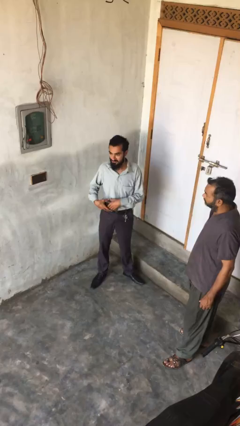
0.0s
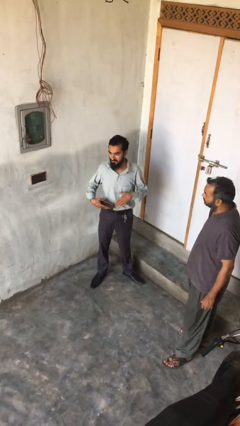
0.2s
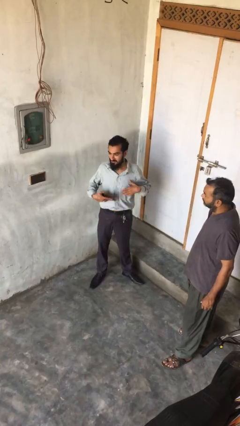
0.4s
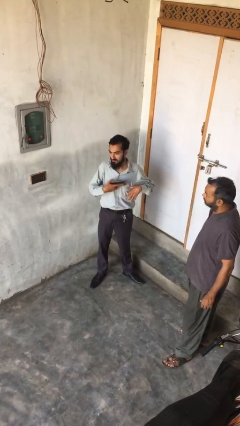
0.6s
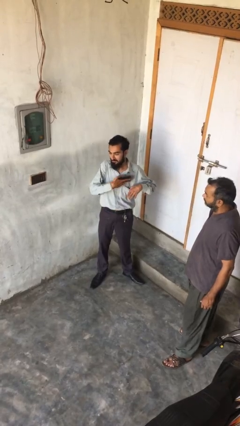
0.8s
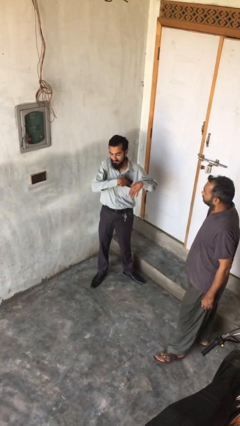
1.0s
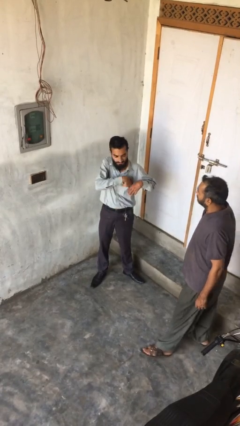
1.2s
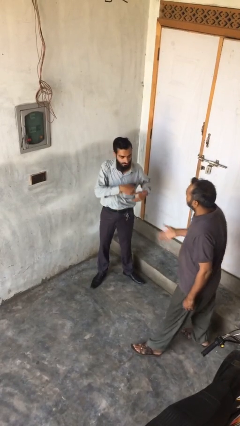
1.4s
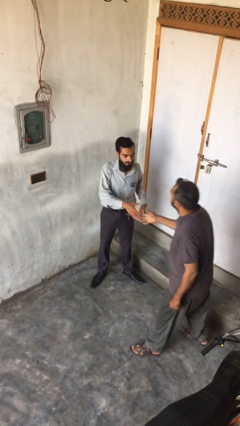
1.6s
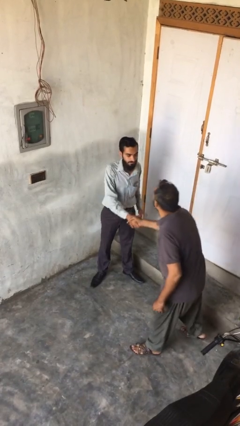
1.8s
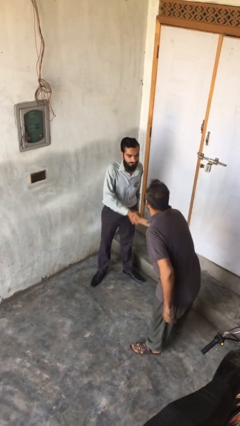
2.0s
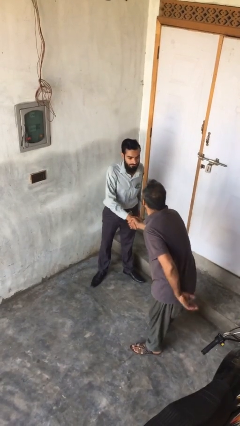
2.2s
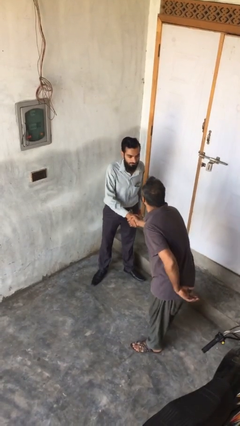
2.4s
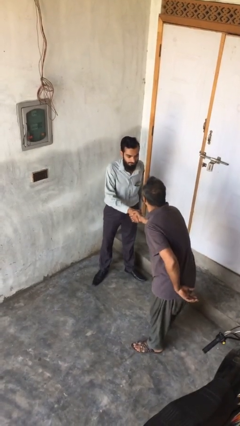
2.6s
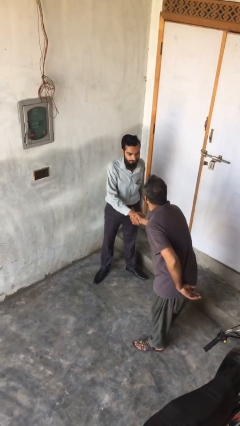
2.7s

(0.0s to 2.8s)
person shakes hand

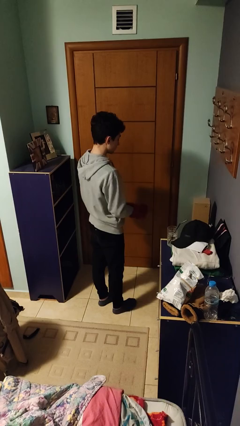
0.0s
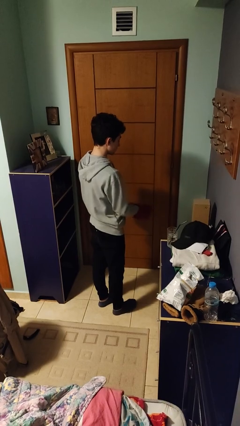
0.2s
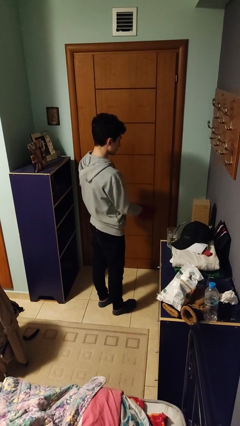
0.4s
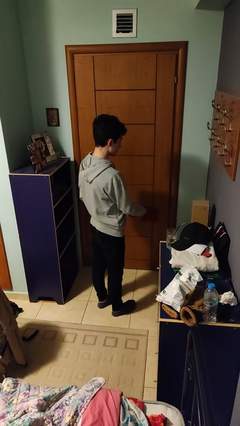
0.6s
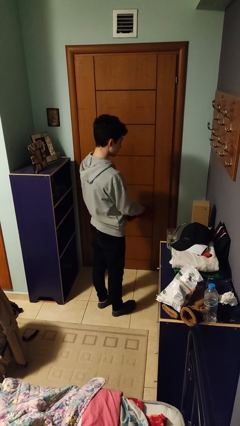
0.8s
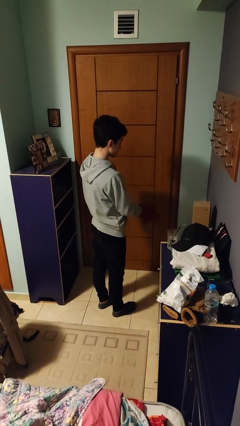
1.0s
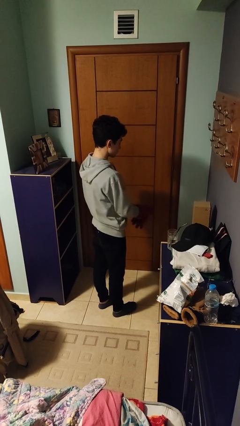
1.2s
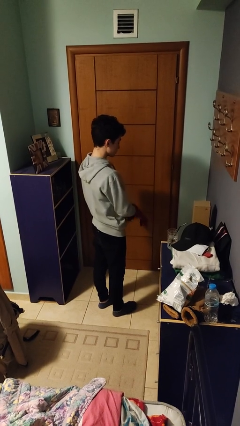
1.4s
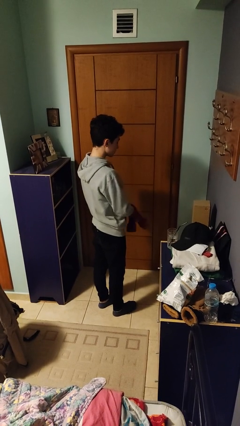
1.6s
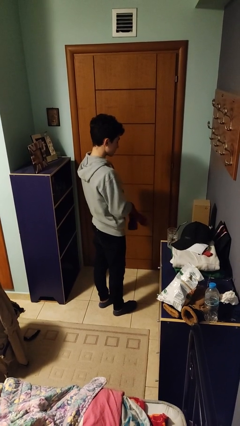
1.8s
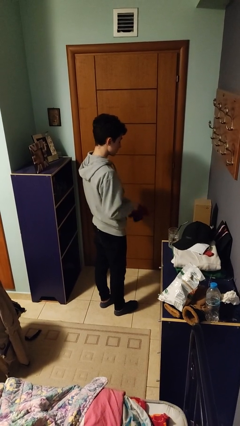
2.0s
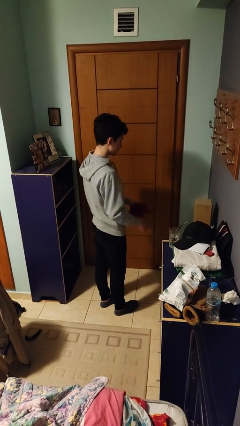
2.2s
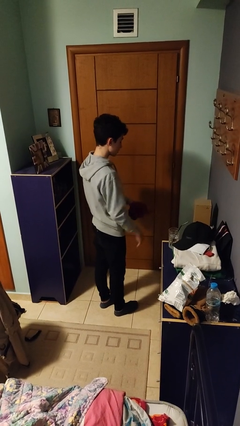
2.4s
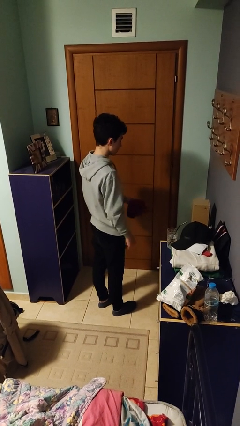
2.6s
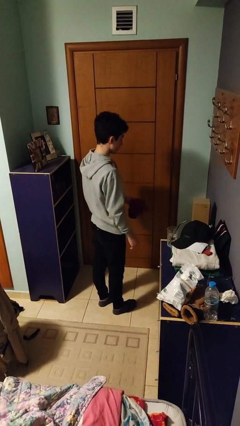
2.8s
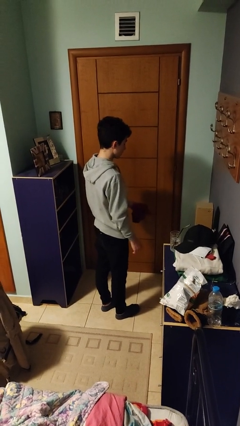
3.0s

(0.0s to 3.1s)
person takes off gloves

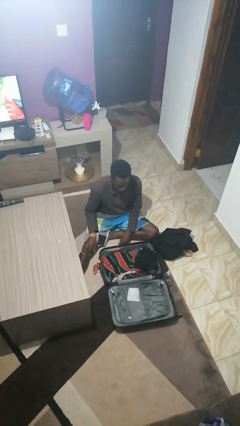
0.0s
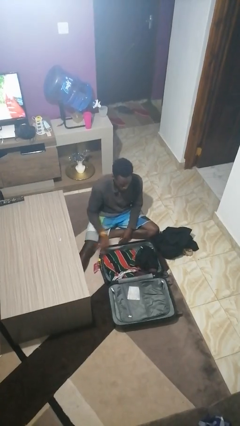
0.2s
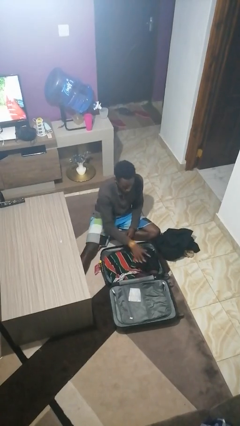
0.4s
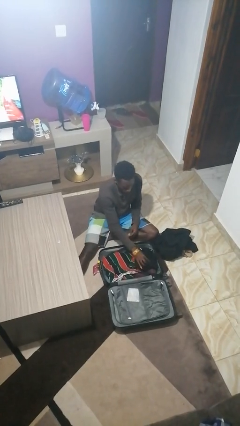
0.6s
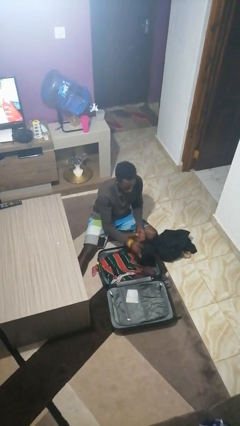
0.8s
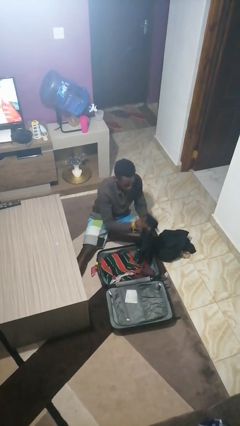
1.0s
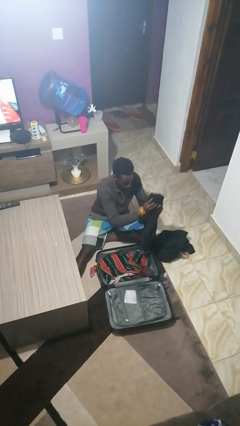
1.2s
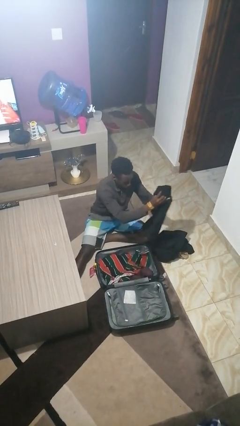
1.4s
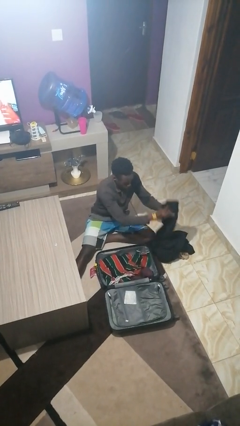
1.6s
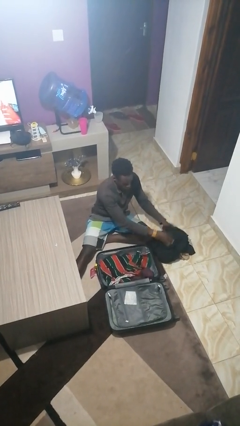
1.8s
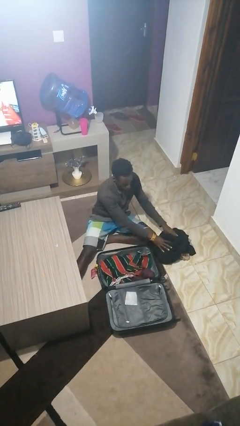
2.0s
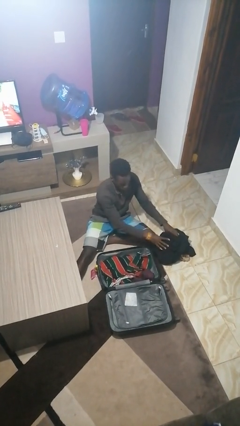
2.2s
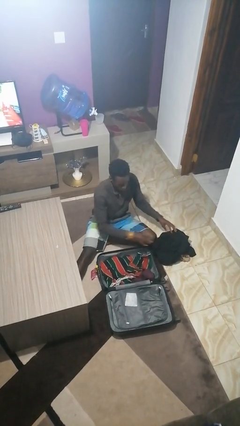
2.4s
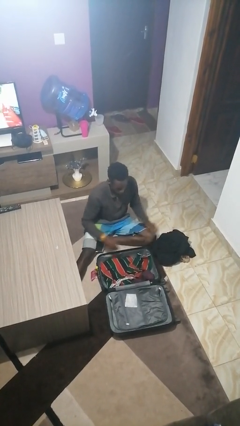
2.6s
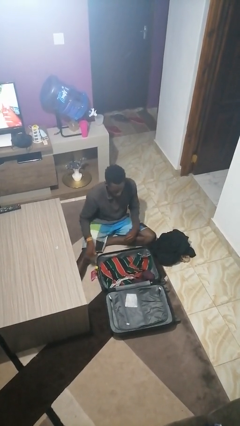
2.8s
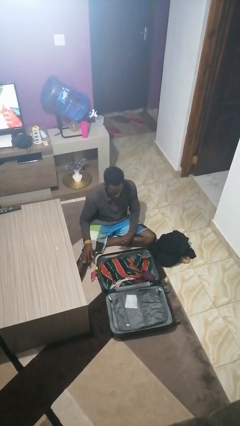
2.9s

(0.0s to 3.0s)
person unloads clothes from suitcase

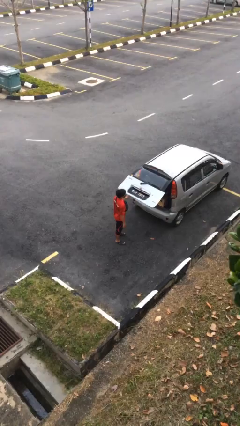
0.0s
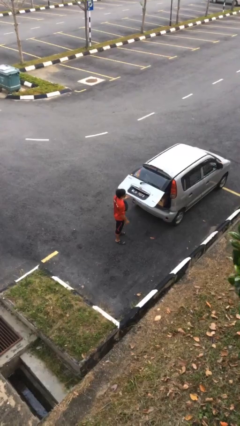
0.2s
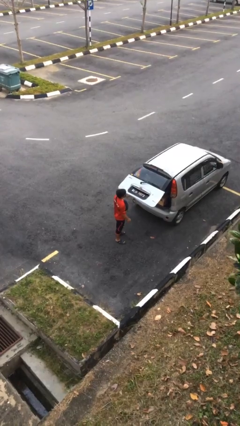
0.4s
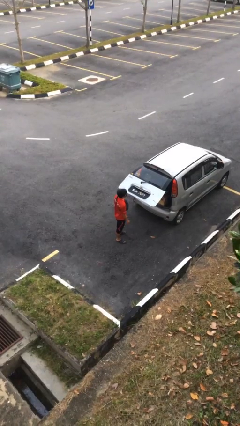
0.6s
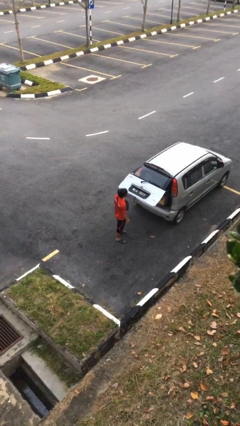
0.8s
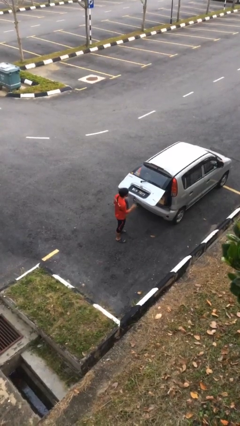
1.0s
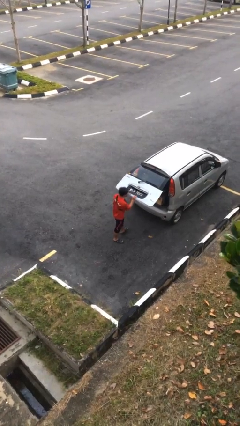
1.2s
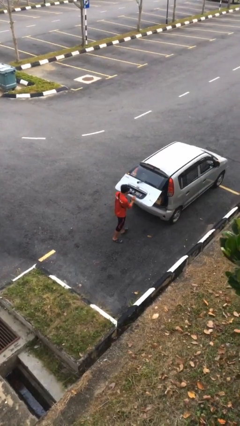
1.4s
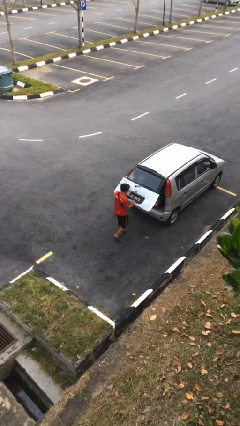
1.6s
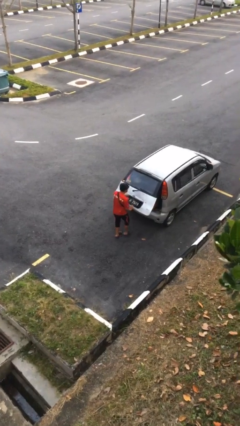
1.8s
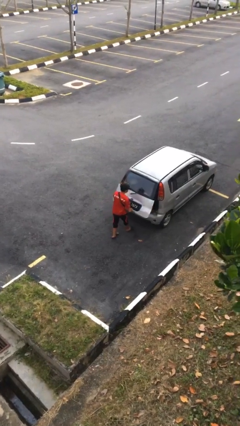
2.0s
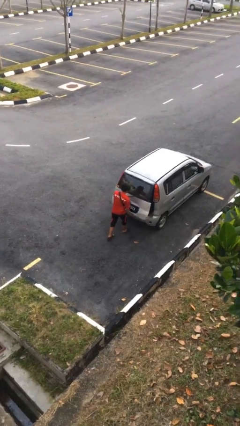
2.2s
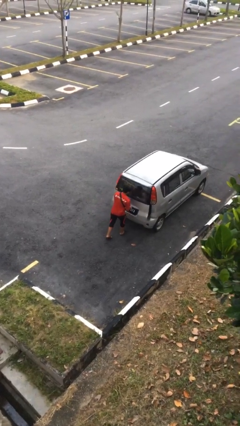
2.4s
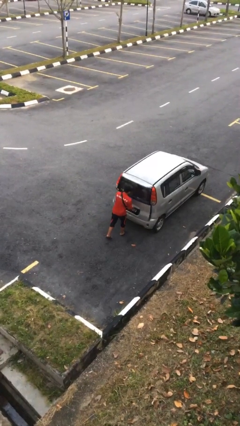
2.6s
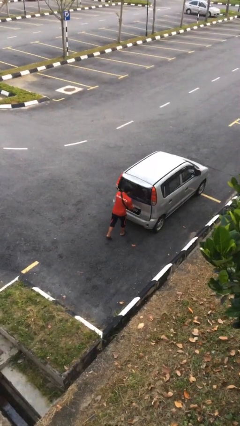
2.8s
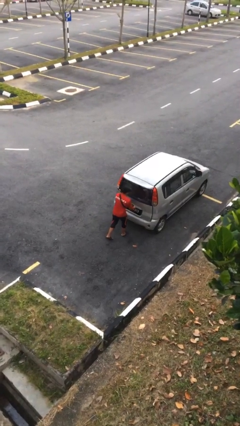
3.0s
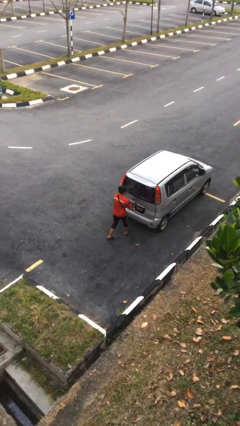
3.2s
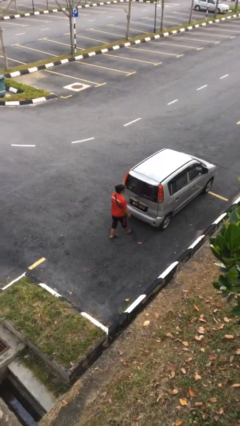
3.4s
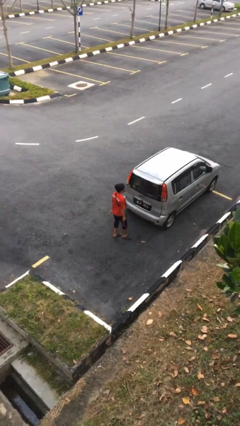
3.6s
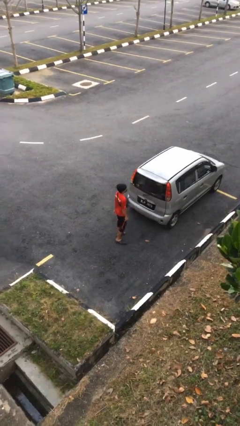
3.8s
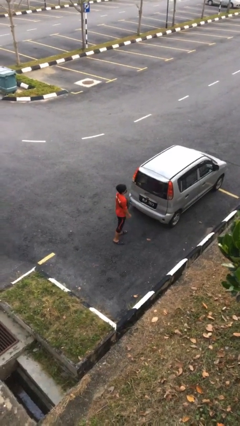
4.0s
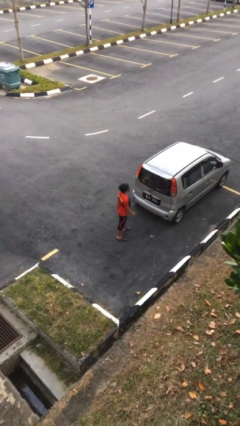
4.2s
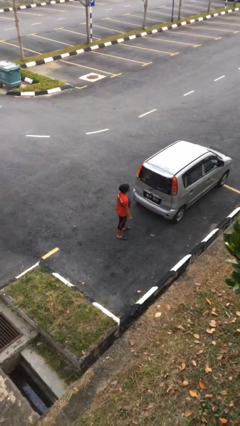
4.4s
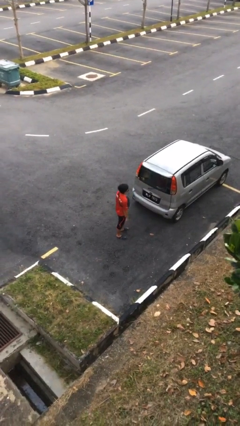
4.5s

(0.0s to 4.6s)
person closes car trunk

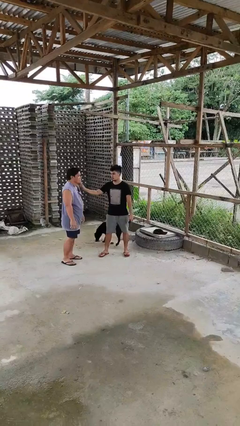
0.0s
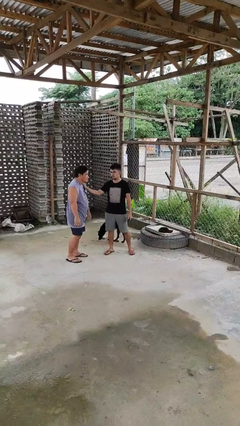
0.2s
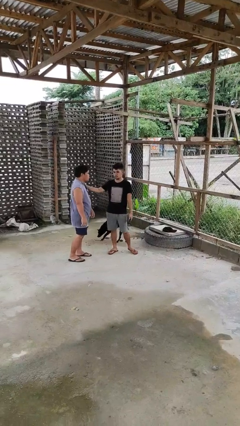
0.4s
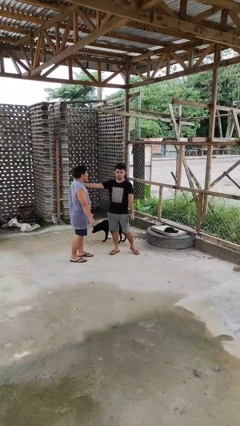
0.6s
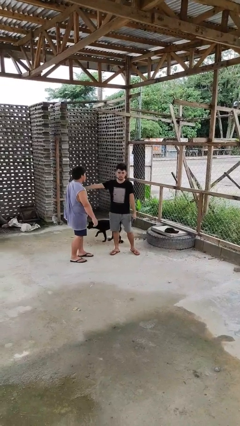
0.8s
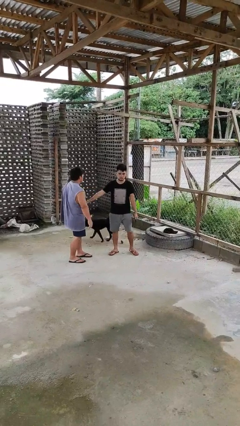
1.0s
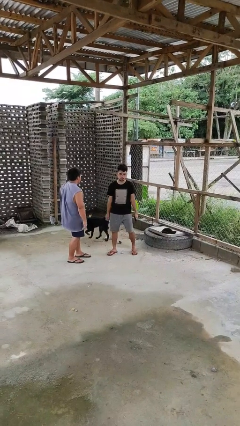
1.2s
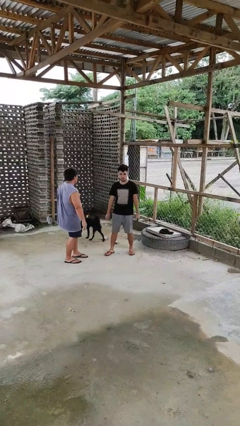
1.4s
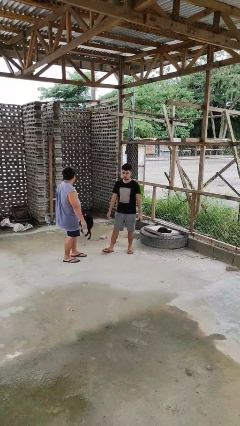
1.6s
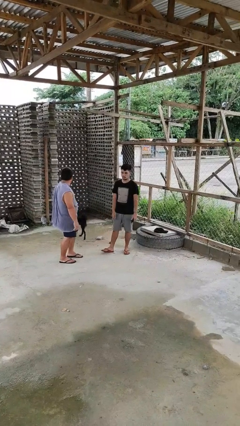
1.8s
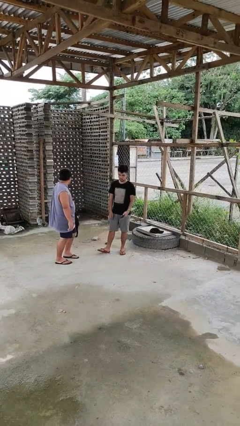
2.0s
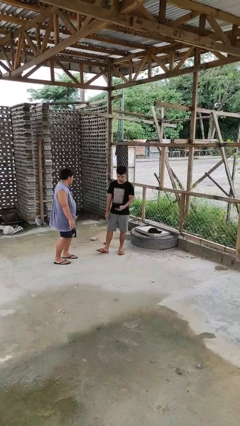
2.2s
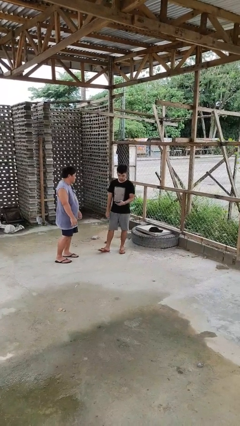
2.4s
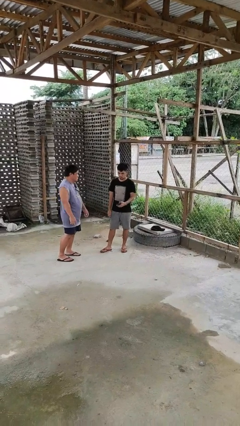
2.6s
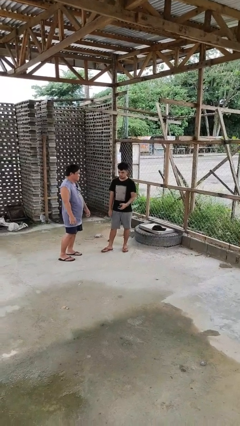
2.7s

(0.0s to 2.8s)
person shoves person

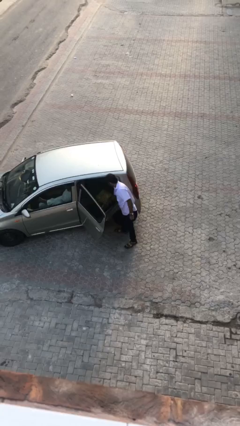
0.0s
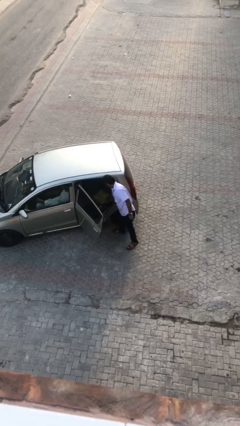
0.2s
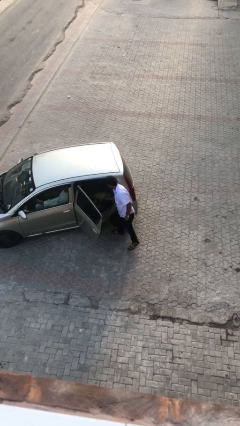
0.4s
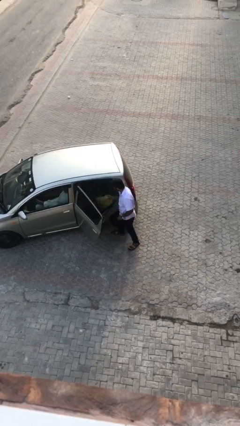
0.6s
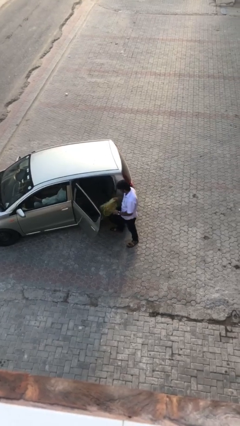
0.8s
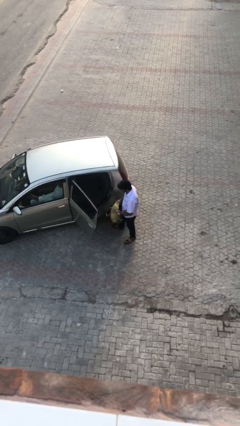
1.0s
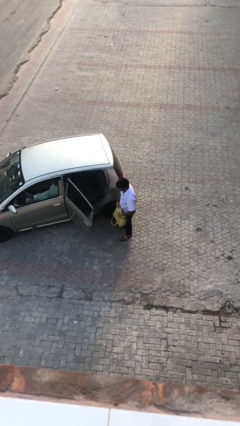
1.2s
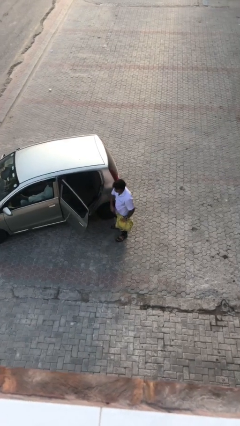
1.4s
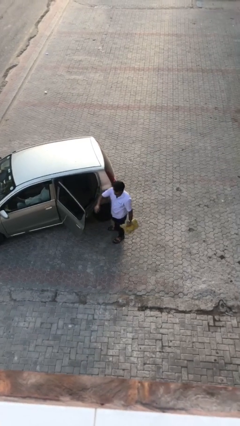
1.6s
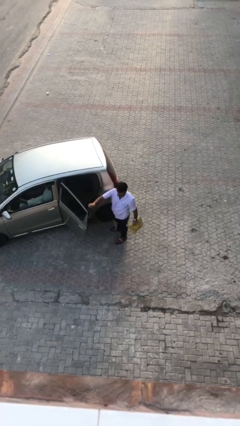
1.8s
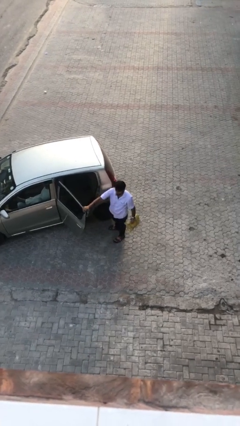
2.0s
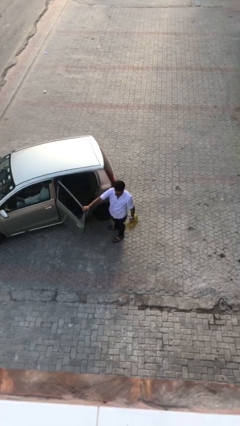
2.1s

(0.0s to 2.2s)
person unloads car
